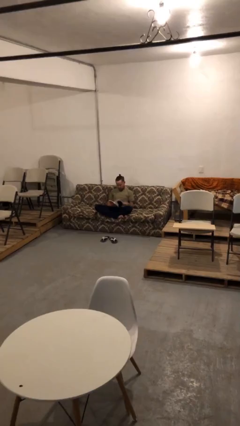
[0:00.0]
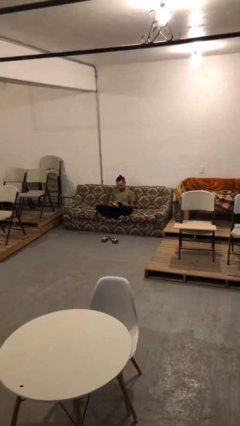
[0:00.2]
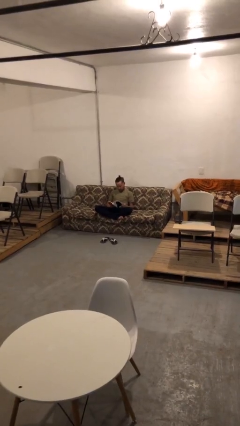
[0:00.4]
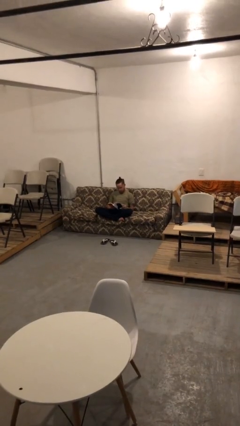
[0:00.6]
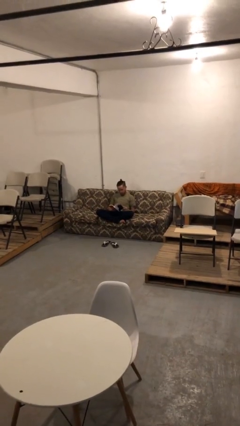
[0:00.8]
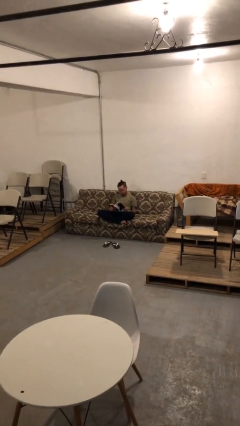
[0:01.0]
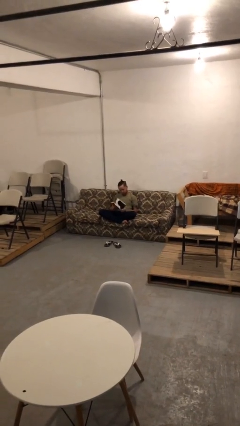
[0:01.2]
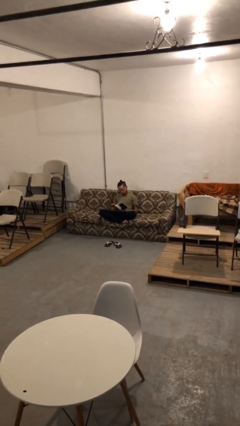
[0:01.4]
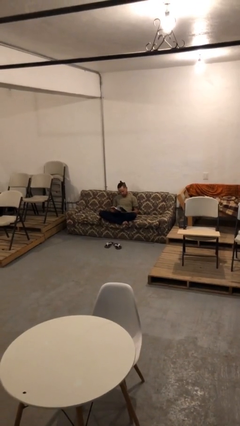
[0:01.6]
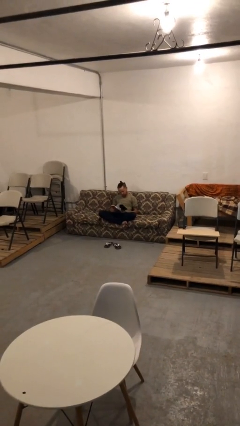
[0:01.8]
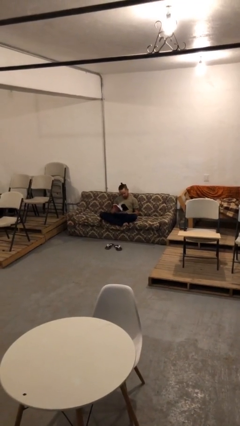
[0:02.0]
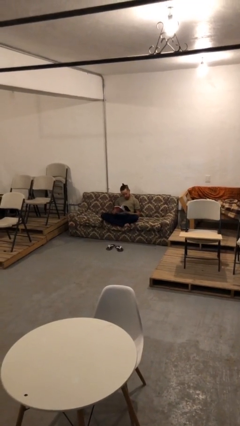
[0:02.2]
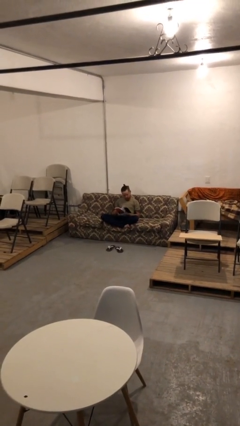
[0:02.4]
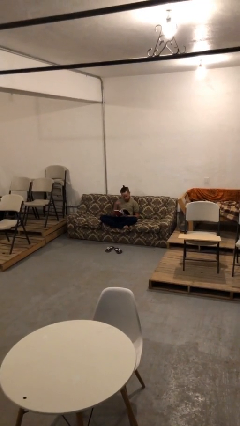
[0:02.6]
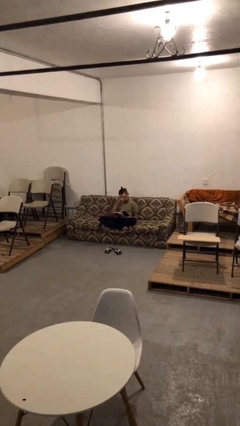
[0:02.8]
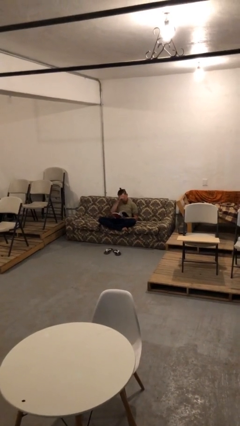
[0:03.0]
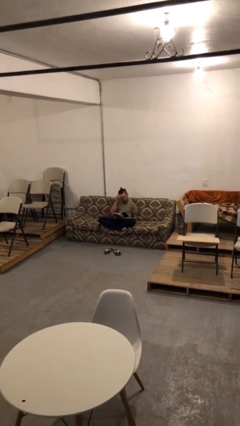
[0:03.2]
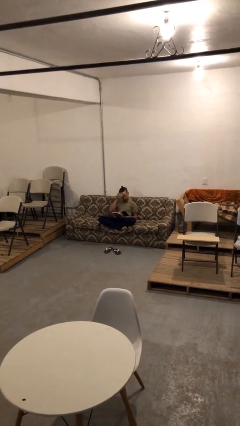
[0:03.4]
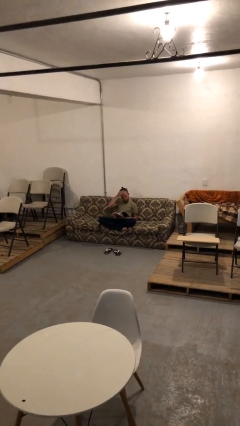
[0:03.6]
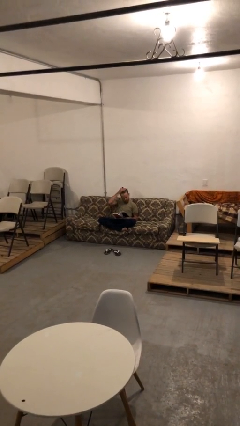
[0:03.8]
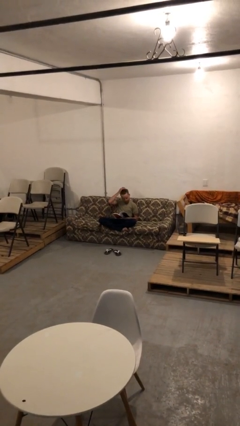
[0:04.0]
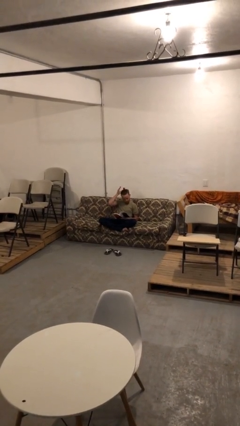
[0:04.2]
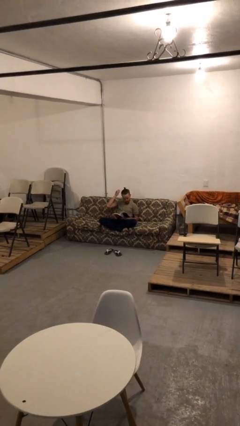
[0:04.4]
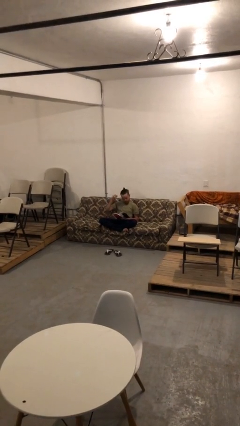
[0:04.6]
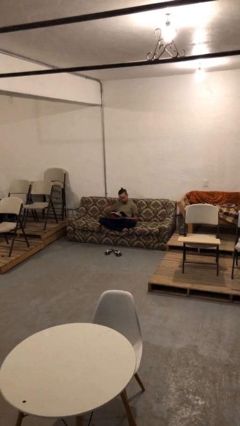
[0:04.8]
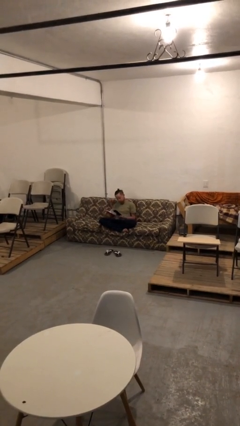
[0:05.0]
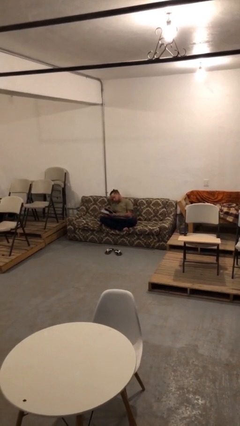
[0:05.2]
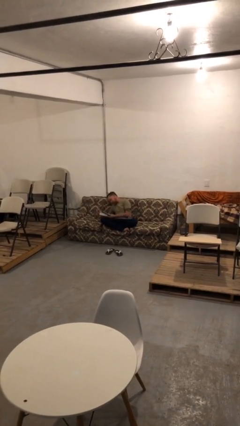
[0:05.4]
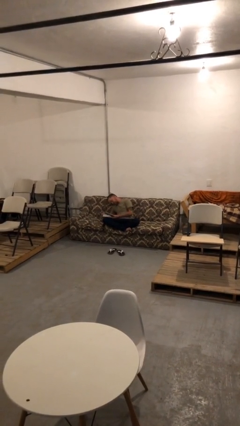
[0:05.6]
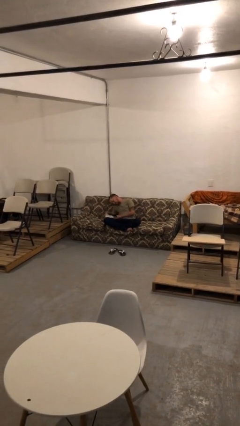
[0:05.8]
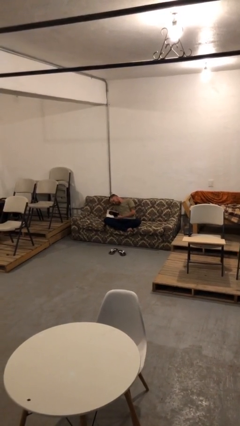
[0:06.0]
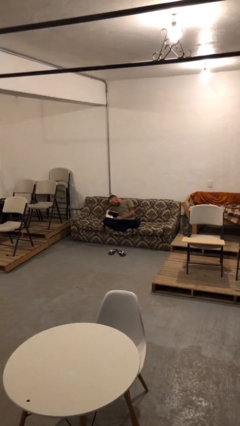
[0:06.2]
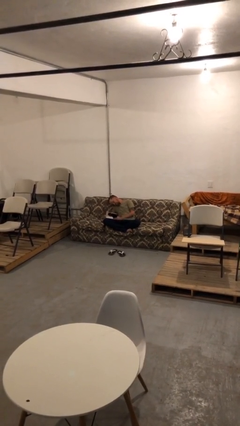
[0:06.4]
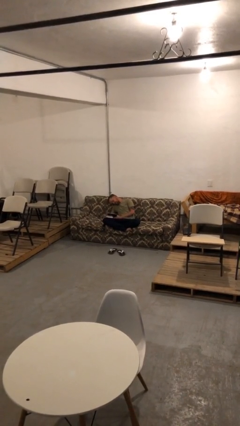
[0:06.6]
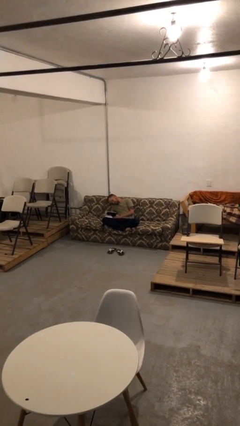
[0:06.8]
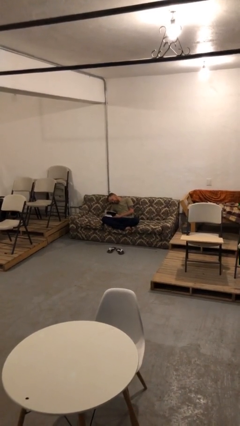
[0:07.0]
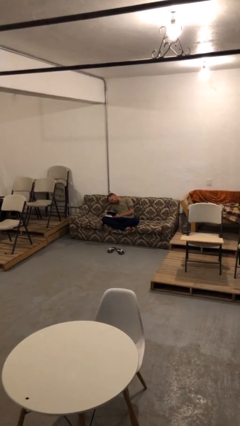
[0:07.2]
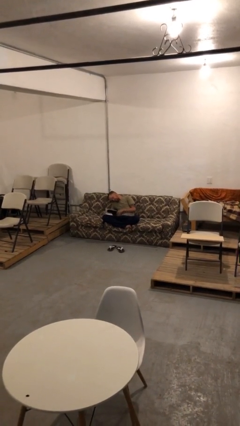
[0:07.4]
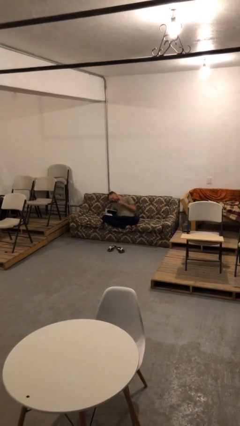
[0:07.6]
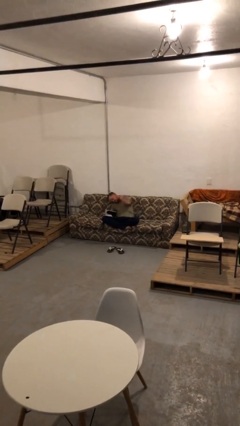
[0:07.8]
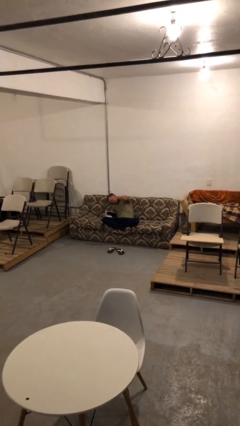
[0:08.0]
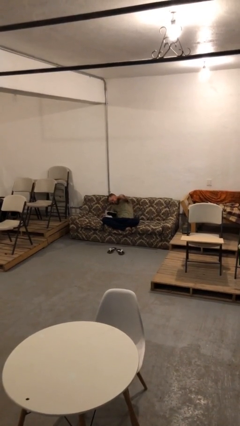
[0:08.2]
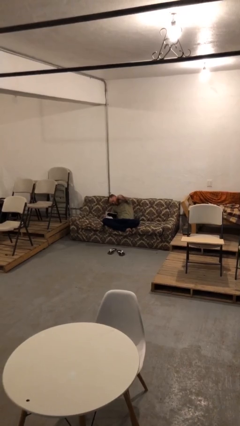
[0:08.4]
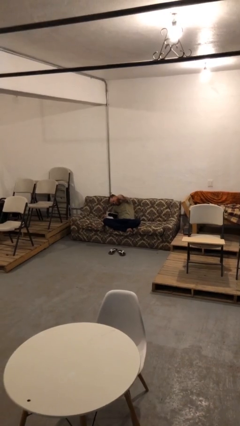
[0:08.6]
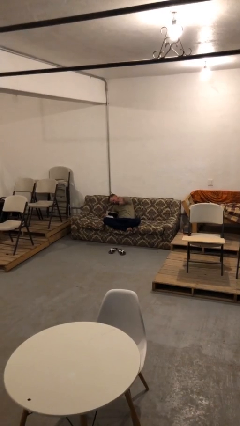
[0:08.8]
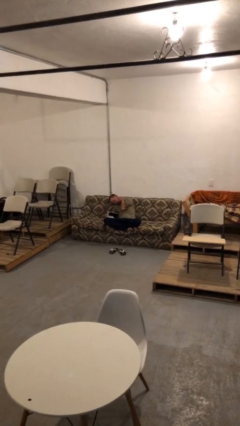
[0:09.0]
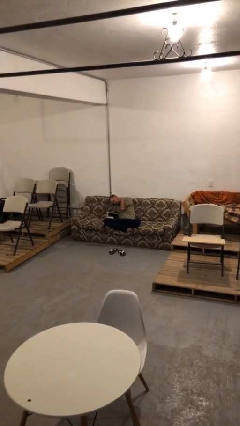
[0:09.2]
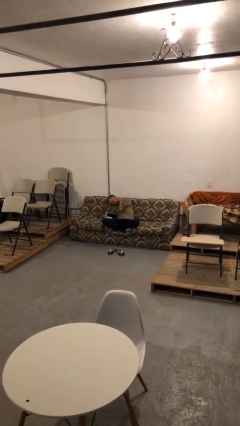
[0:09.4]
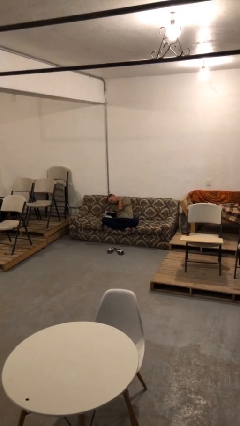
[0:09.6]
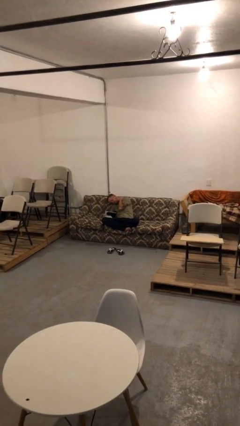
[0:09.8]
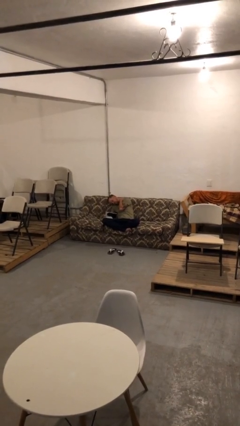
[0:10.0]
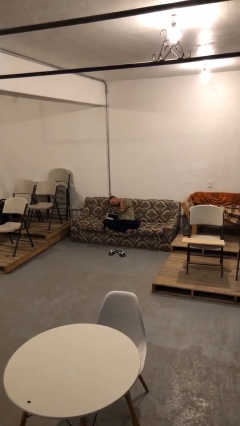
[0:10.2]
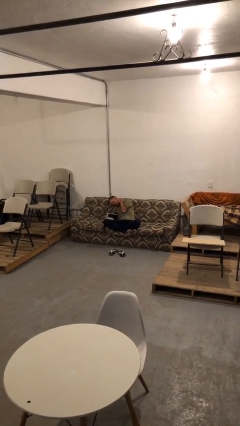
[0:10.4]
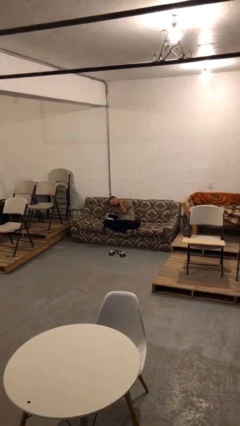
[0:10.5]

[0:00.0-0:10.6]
person reads document

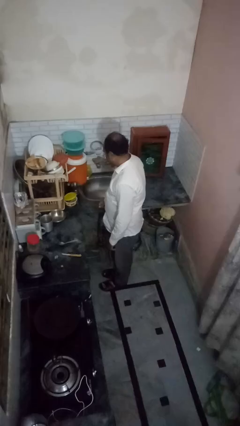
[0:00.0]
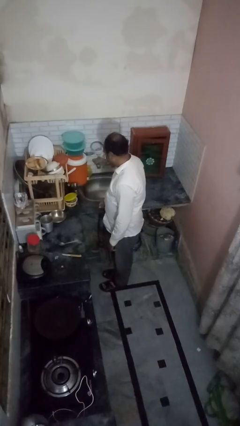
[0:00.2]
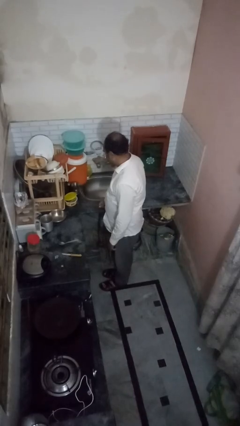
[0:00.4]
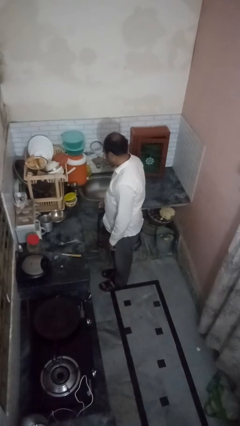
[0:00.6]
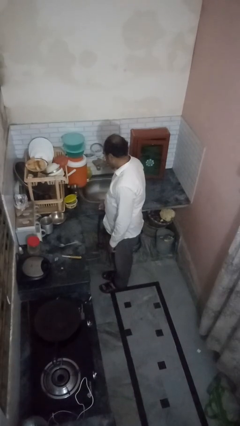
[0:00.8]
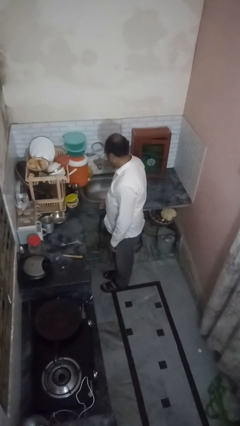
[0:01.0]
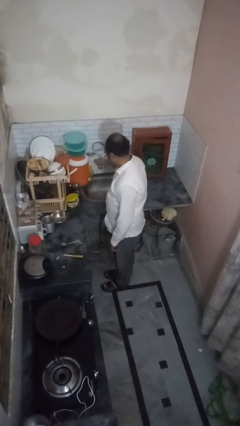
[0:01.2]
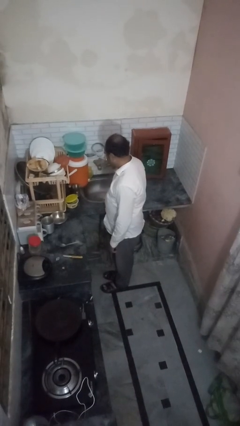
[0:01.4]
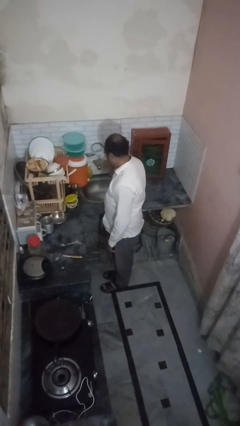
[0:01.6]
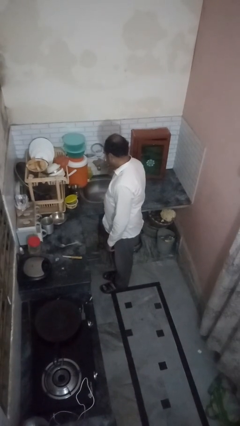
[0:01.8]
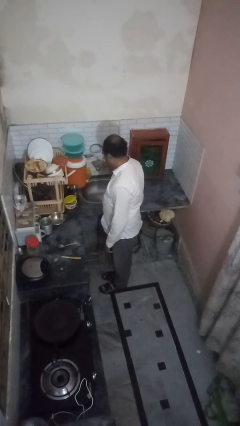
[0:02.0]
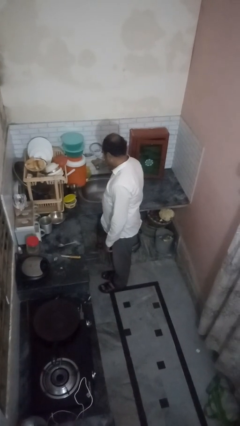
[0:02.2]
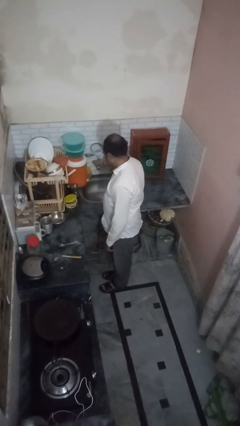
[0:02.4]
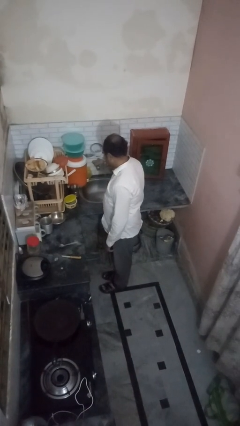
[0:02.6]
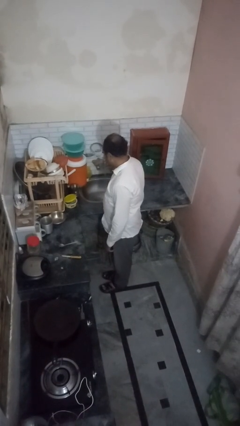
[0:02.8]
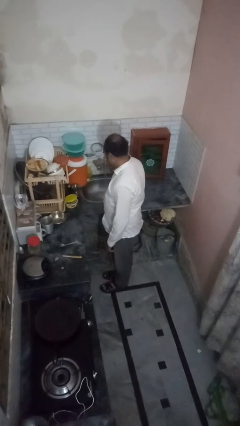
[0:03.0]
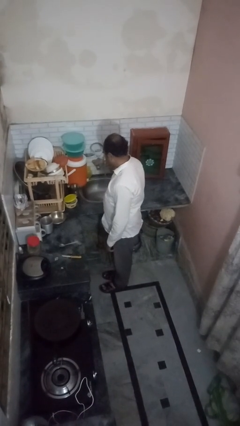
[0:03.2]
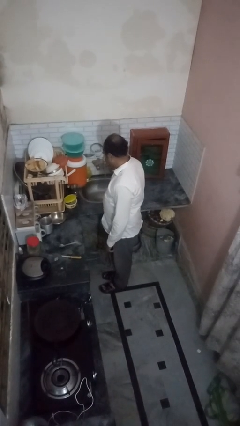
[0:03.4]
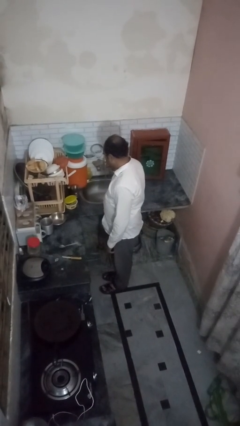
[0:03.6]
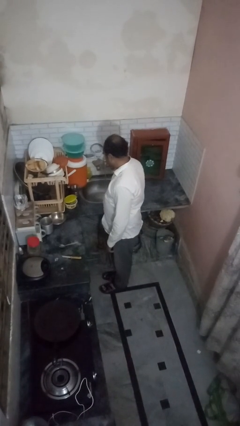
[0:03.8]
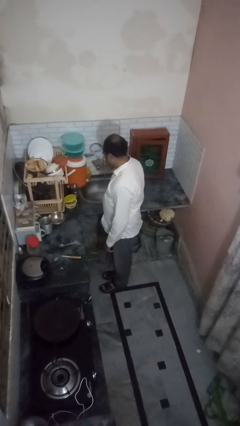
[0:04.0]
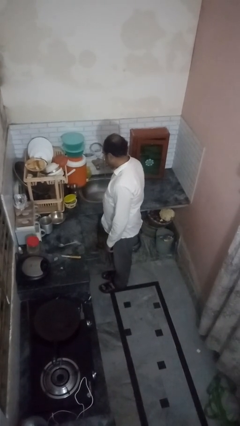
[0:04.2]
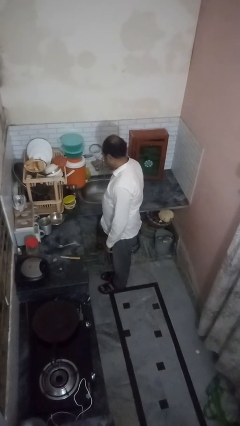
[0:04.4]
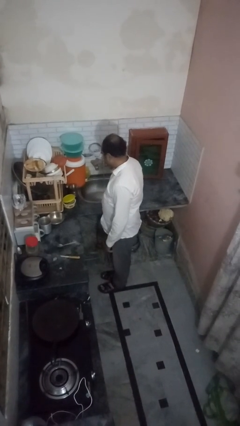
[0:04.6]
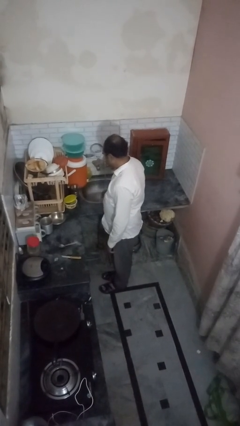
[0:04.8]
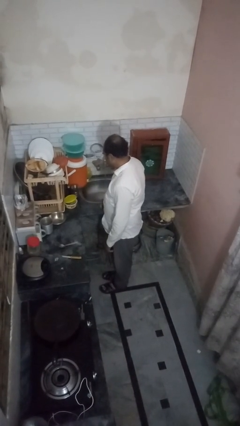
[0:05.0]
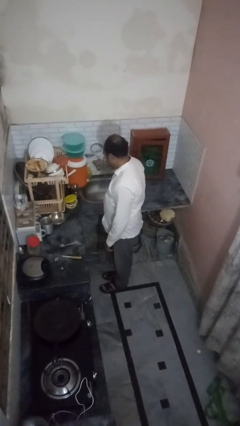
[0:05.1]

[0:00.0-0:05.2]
person turns on faucet

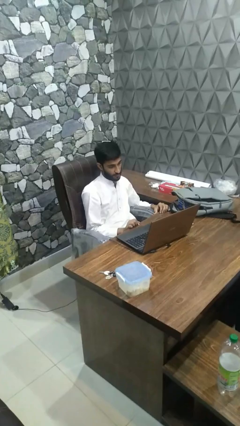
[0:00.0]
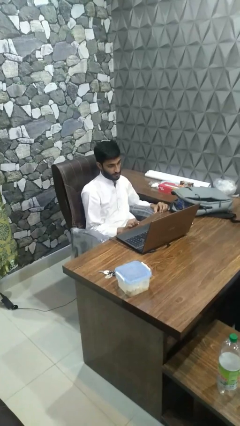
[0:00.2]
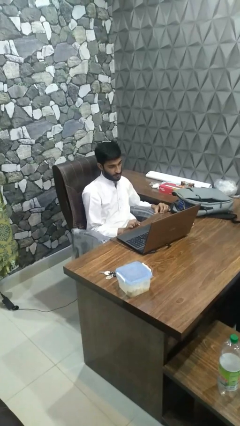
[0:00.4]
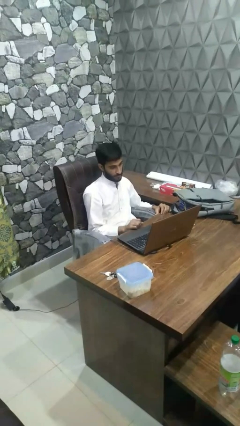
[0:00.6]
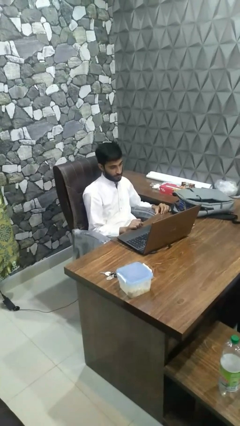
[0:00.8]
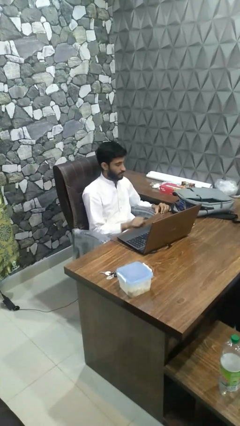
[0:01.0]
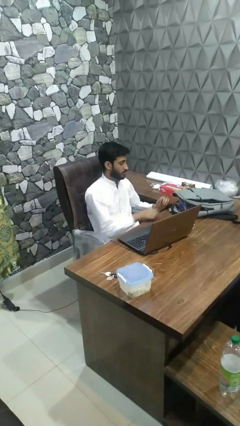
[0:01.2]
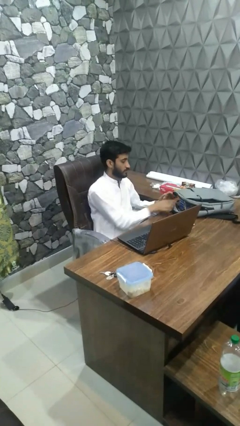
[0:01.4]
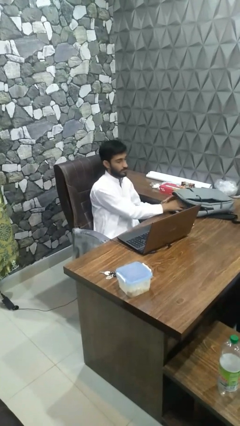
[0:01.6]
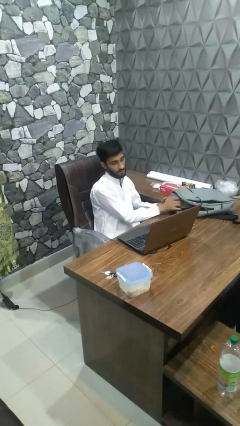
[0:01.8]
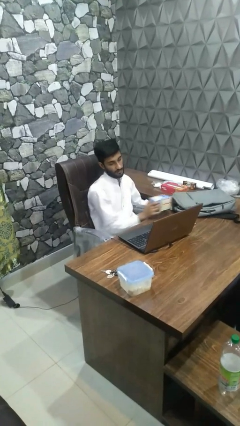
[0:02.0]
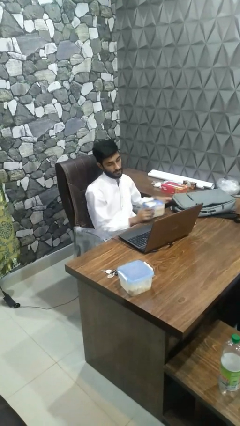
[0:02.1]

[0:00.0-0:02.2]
person takes object from bag
